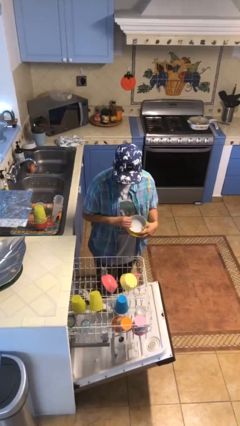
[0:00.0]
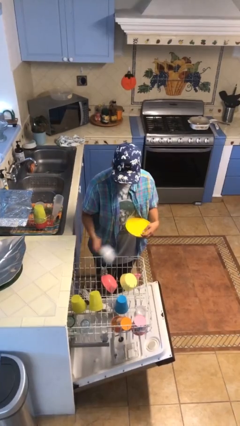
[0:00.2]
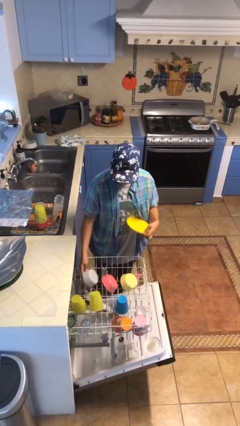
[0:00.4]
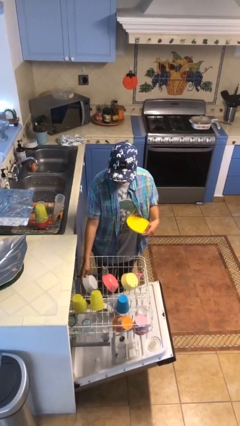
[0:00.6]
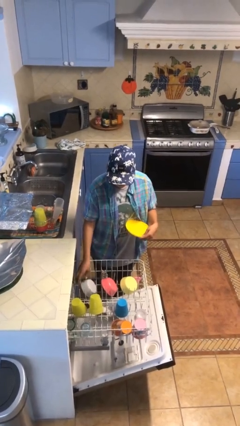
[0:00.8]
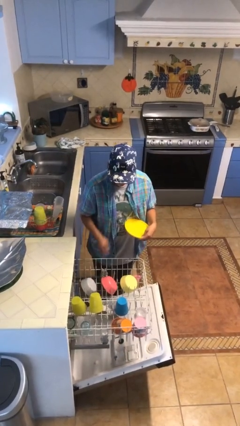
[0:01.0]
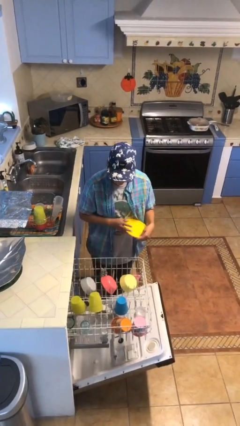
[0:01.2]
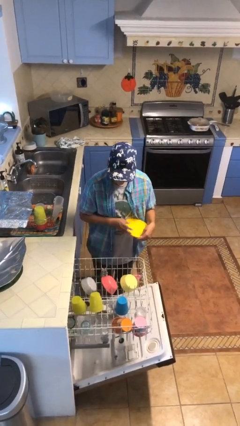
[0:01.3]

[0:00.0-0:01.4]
person loads dishwasher

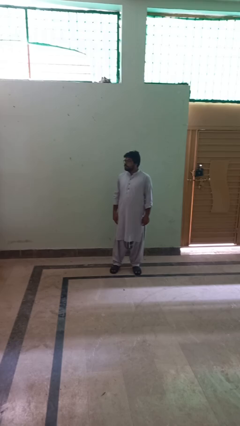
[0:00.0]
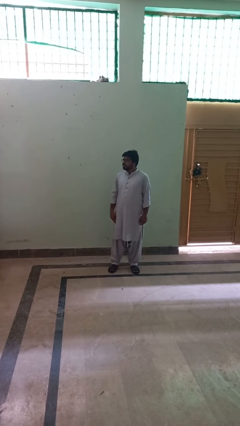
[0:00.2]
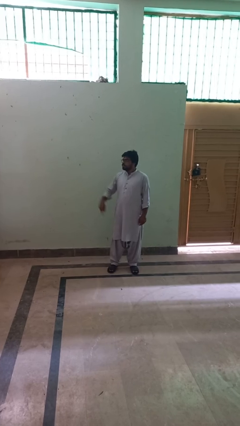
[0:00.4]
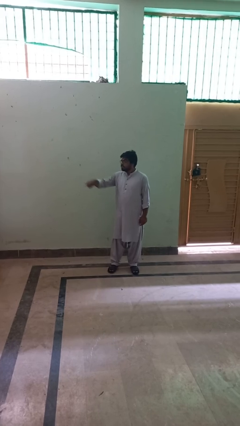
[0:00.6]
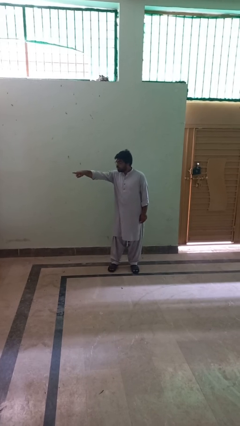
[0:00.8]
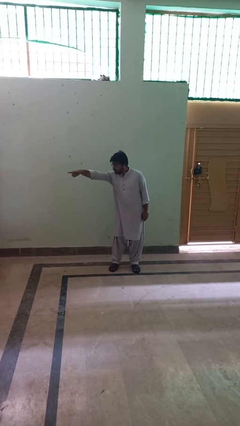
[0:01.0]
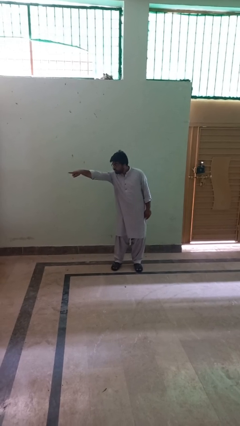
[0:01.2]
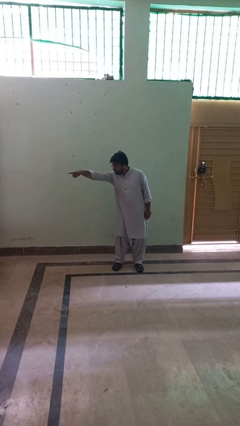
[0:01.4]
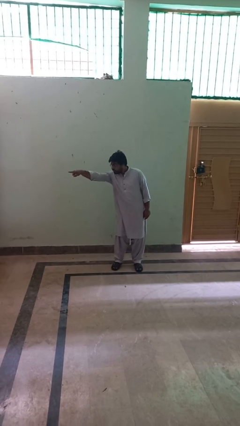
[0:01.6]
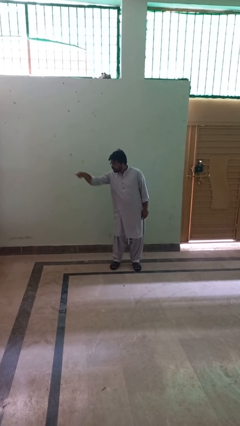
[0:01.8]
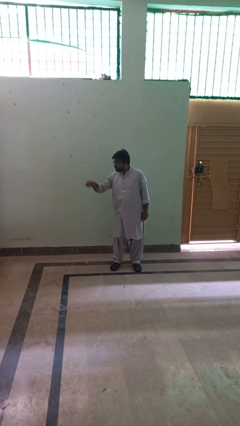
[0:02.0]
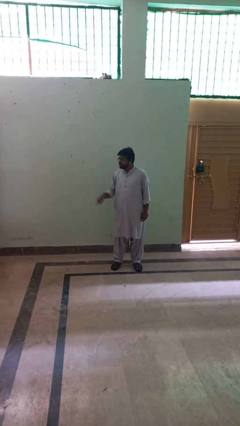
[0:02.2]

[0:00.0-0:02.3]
person points at person

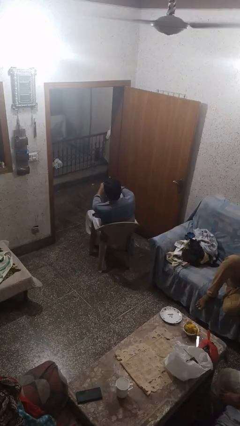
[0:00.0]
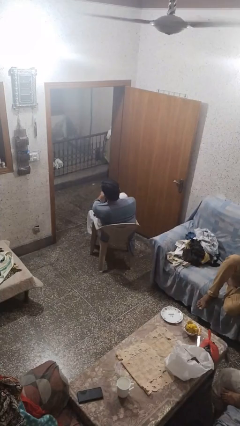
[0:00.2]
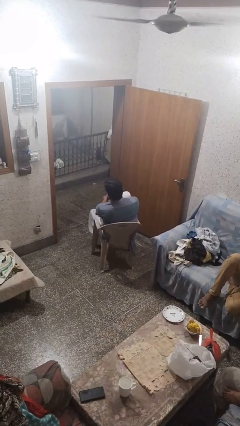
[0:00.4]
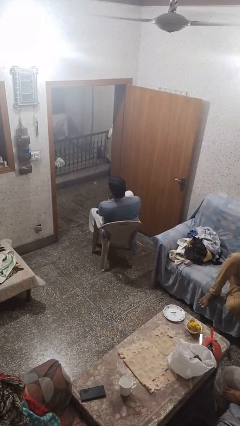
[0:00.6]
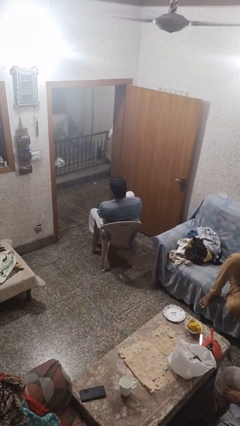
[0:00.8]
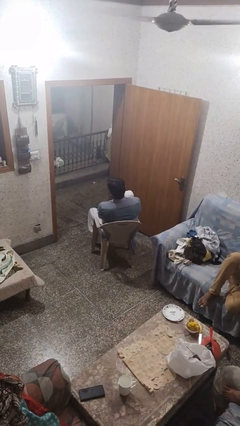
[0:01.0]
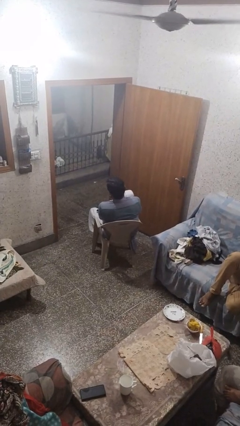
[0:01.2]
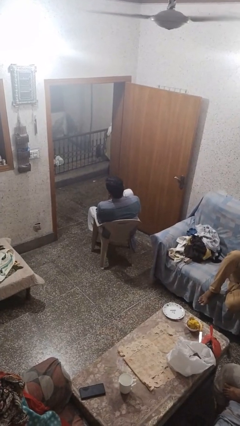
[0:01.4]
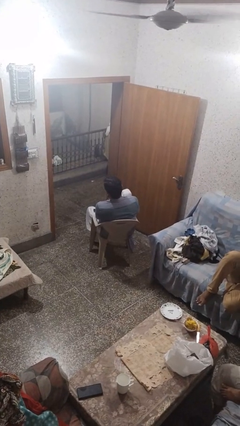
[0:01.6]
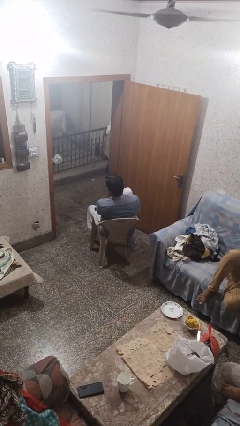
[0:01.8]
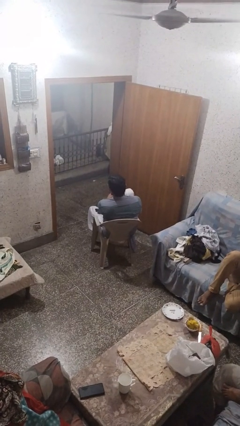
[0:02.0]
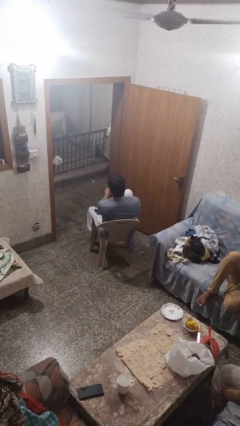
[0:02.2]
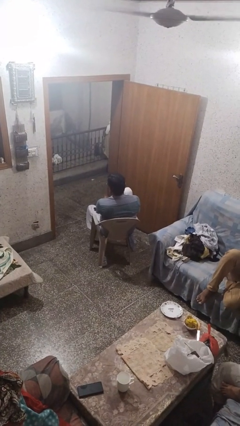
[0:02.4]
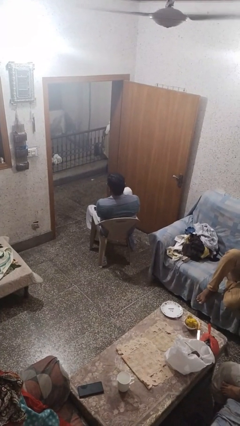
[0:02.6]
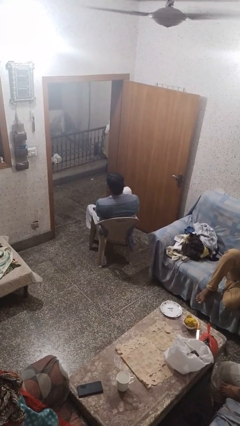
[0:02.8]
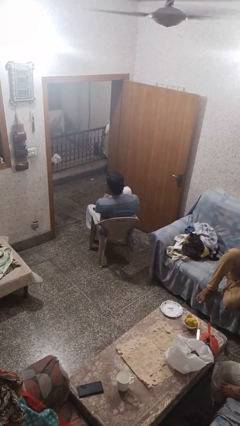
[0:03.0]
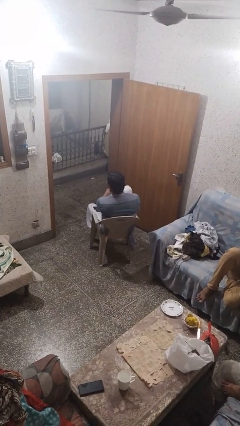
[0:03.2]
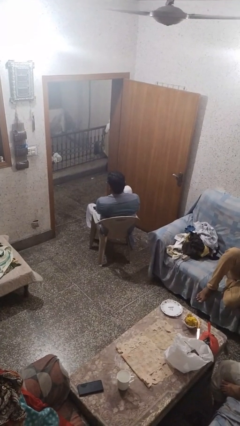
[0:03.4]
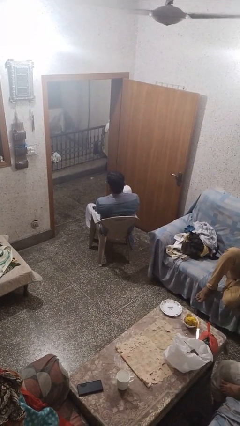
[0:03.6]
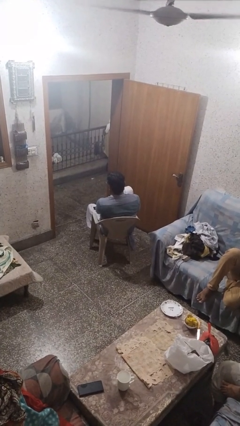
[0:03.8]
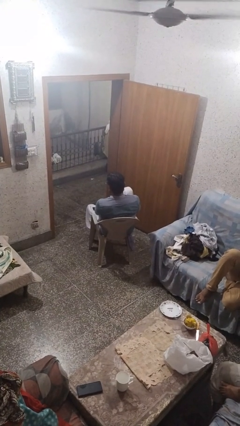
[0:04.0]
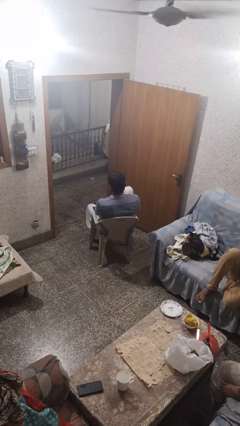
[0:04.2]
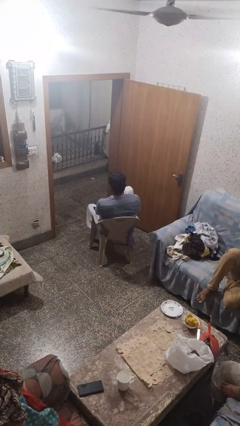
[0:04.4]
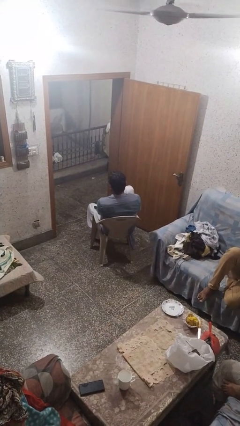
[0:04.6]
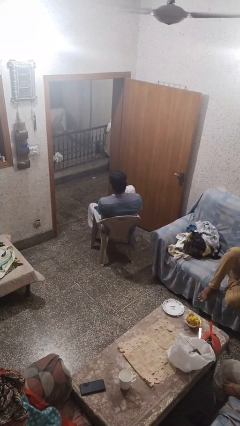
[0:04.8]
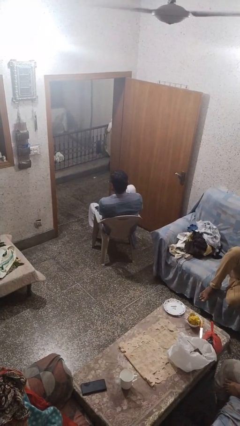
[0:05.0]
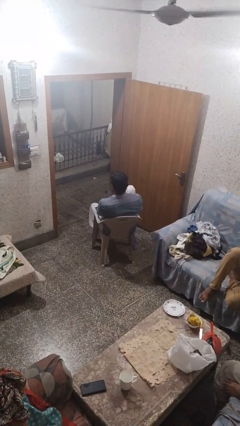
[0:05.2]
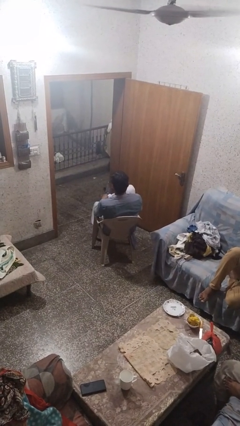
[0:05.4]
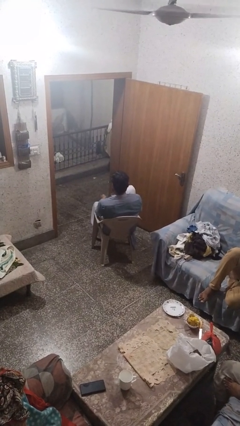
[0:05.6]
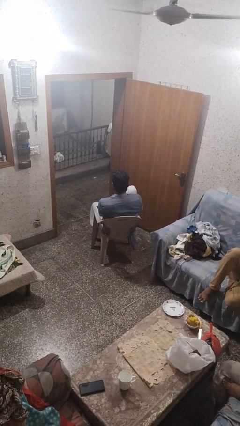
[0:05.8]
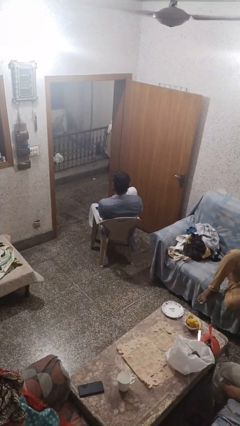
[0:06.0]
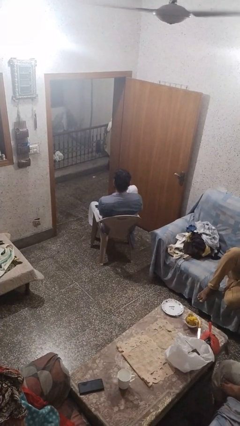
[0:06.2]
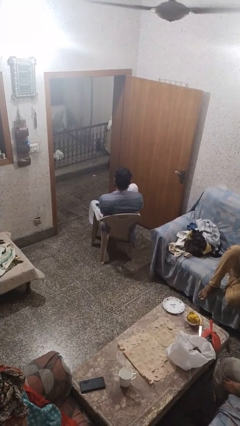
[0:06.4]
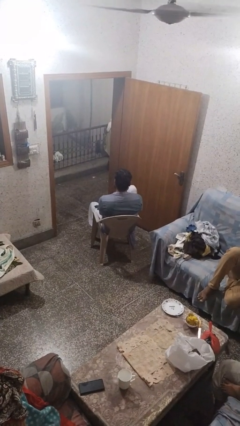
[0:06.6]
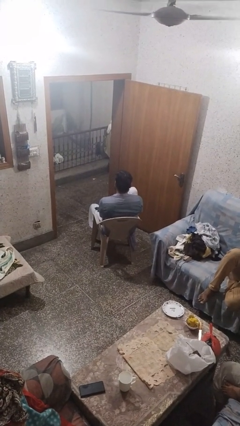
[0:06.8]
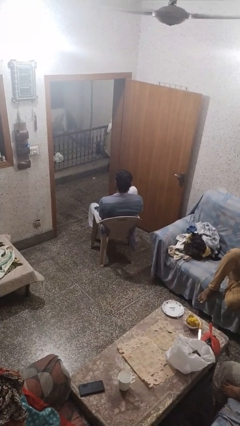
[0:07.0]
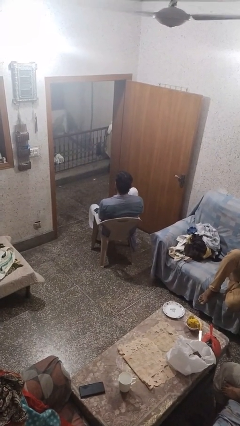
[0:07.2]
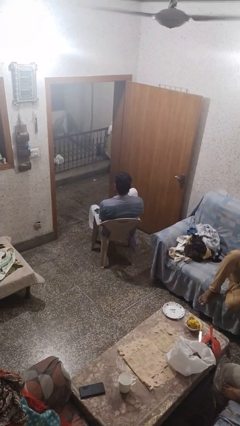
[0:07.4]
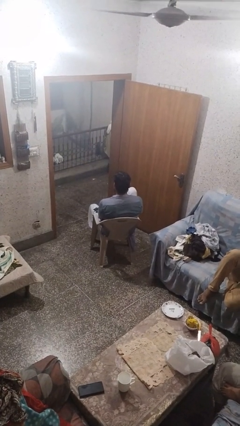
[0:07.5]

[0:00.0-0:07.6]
person puts on socks

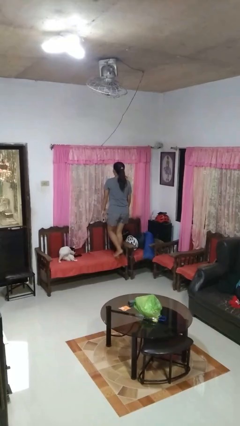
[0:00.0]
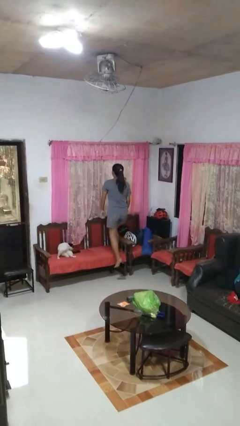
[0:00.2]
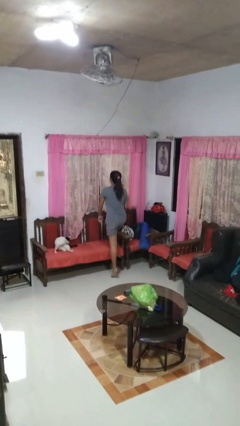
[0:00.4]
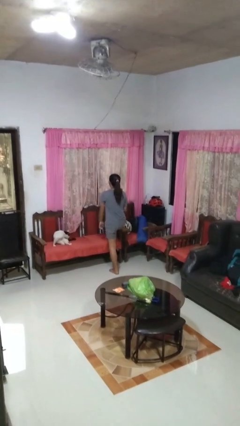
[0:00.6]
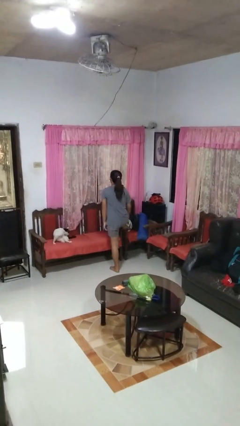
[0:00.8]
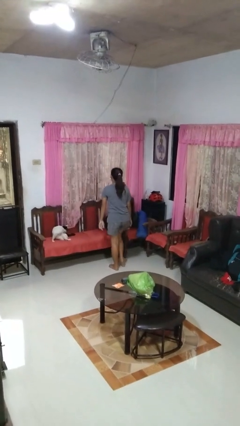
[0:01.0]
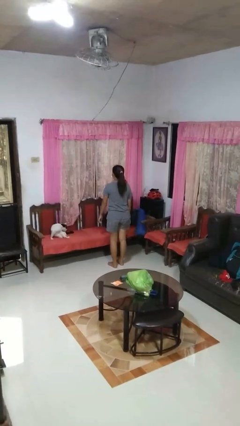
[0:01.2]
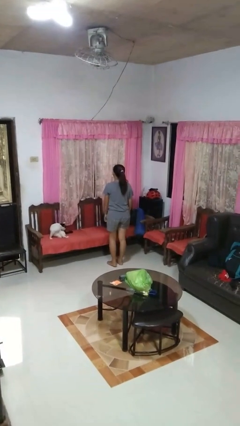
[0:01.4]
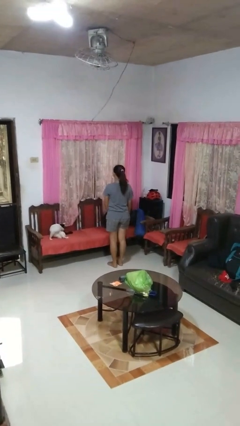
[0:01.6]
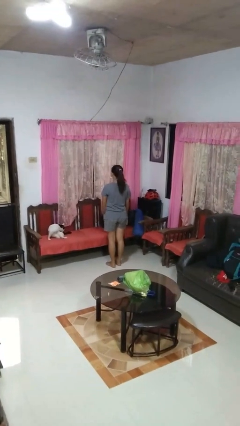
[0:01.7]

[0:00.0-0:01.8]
person climbs off chair

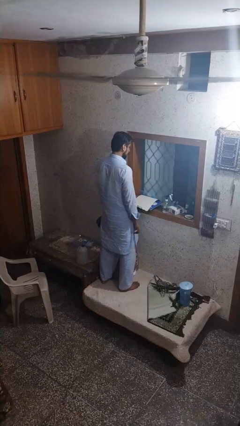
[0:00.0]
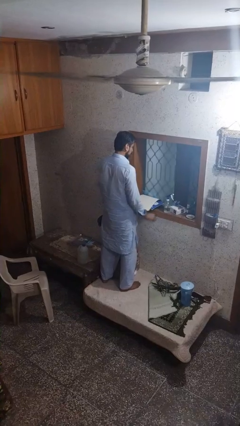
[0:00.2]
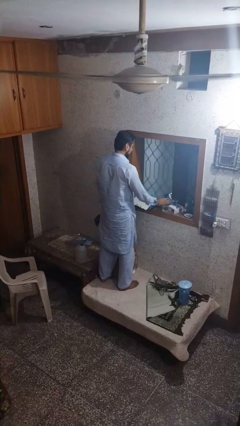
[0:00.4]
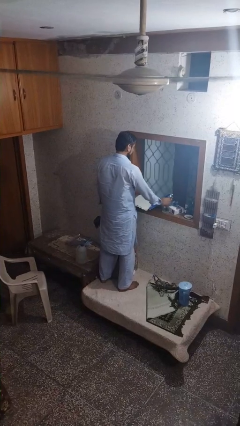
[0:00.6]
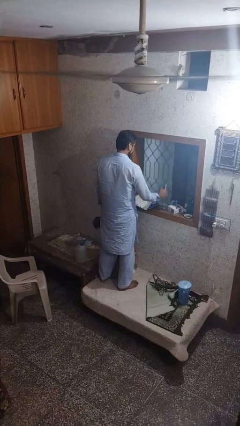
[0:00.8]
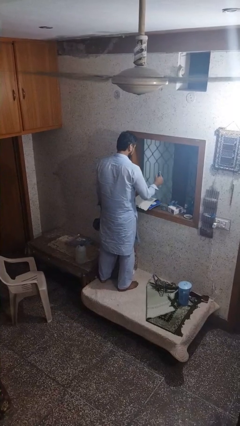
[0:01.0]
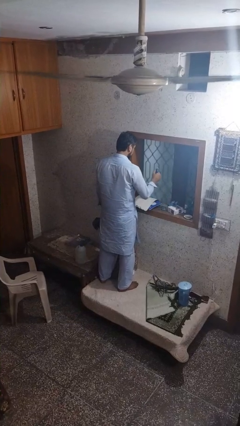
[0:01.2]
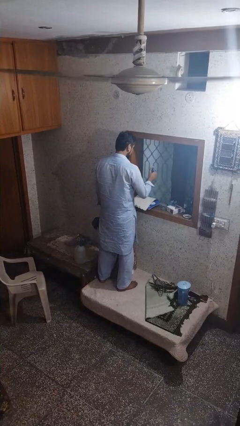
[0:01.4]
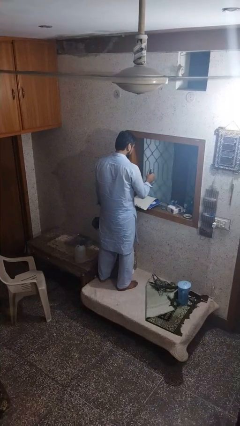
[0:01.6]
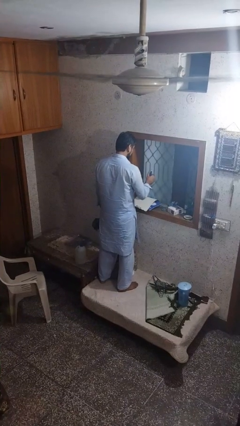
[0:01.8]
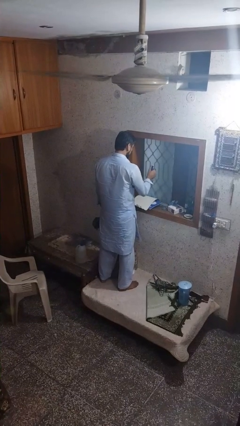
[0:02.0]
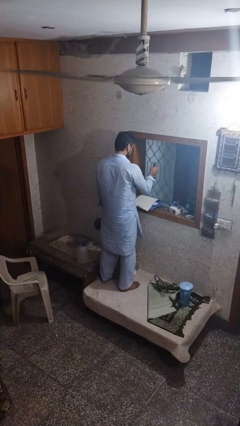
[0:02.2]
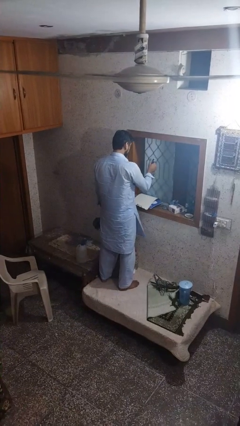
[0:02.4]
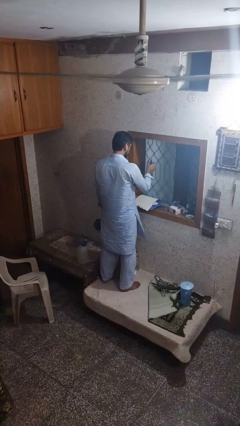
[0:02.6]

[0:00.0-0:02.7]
person sprays from bottle

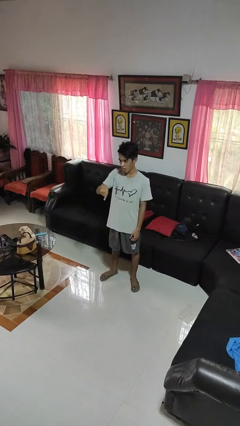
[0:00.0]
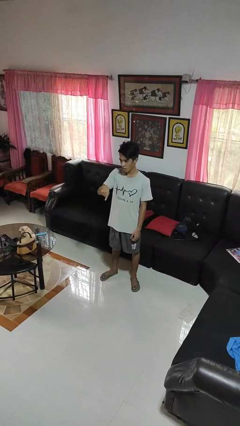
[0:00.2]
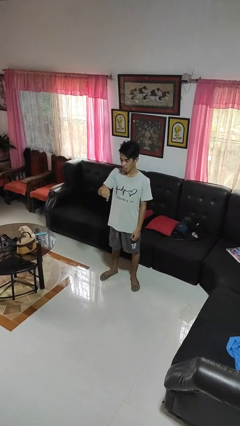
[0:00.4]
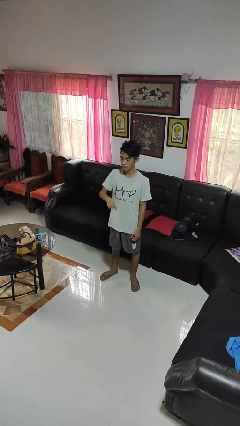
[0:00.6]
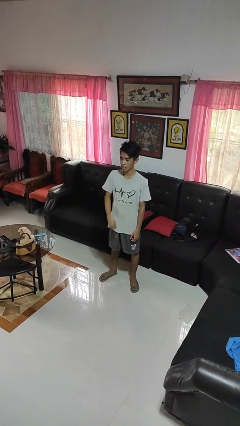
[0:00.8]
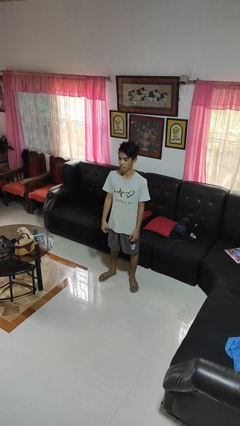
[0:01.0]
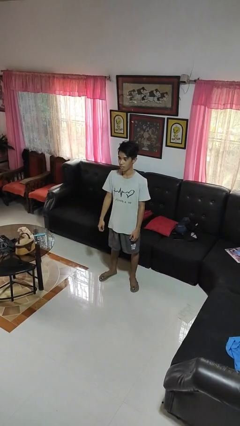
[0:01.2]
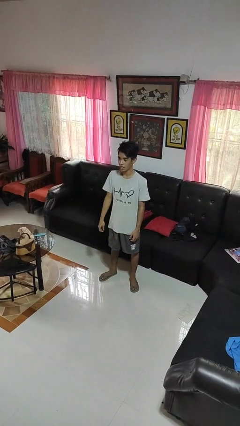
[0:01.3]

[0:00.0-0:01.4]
person gestures swipe down
